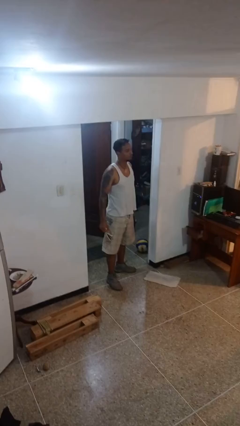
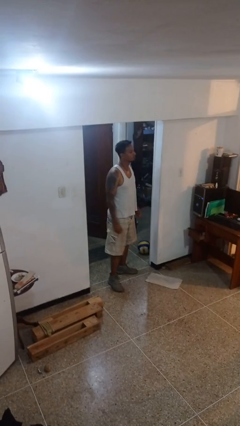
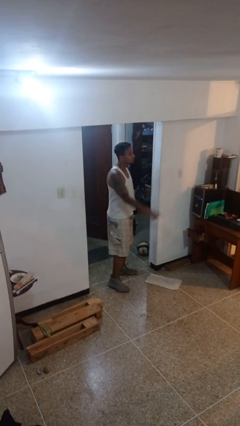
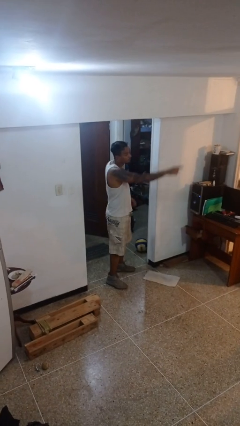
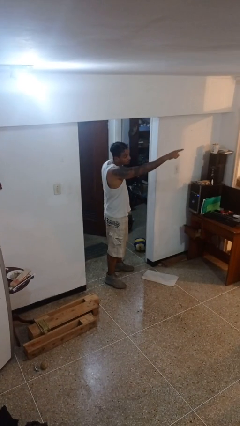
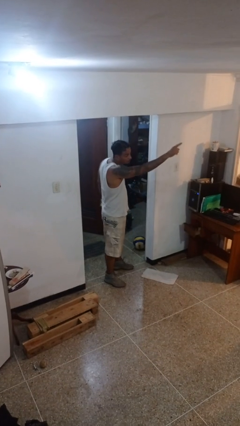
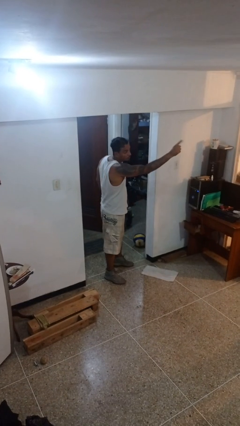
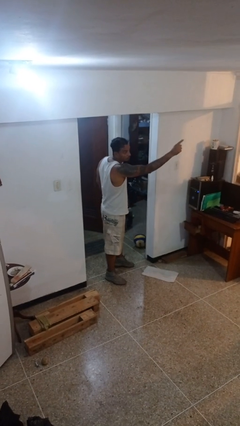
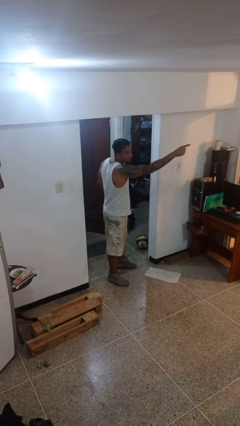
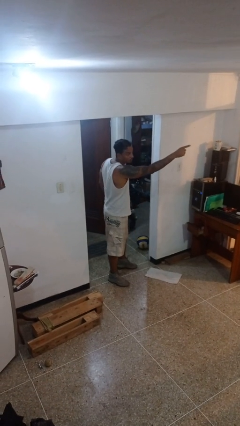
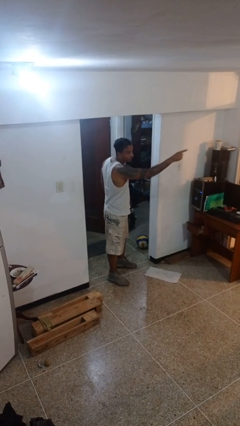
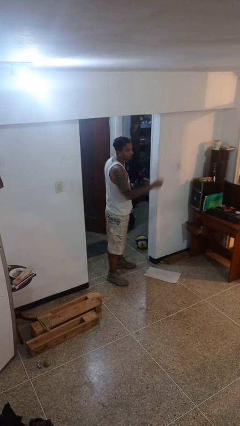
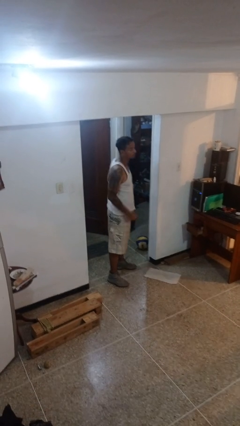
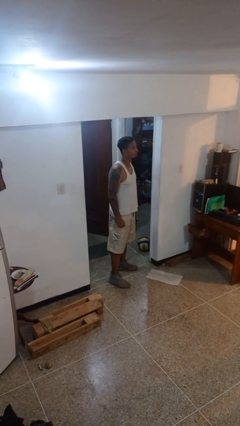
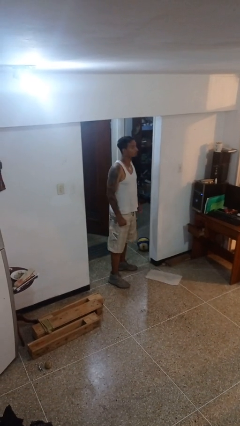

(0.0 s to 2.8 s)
person points at person

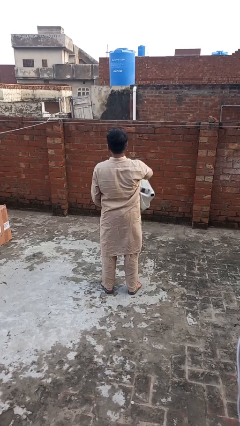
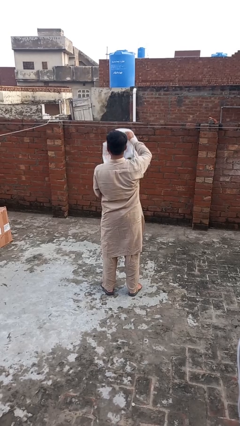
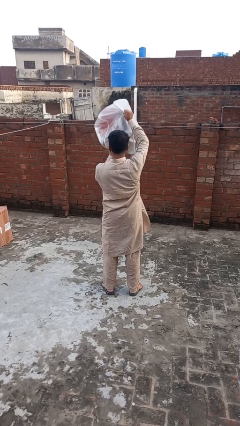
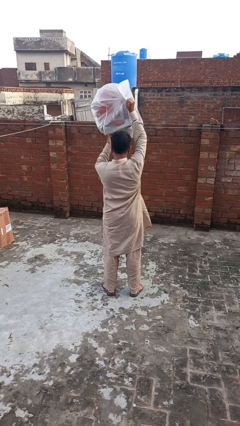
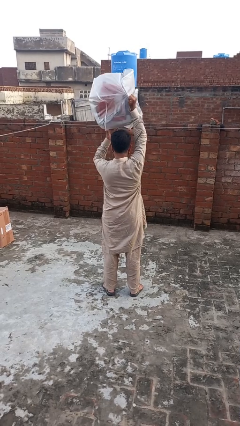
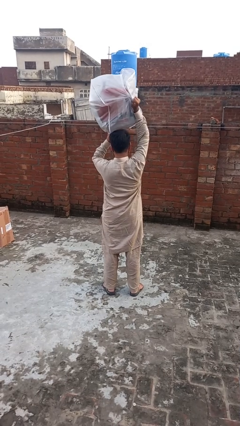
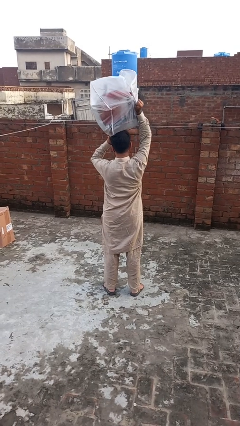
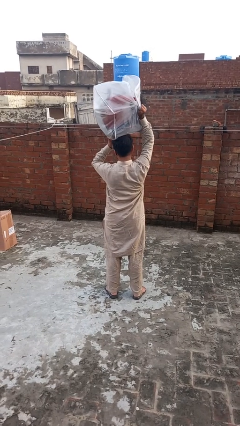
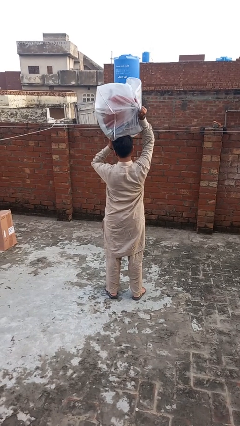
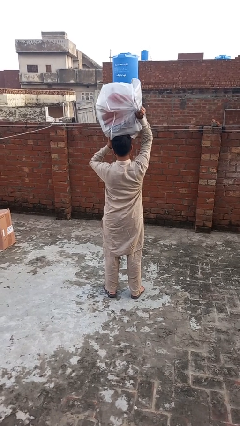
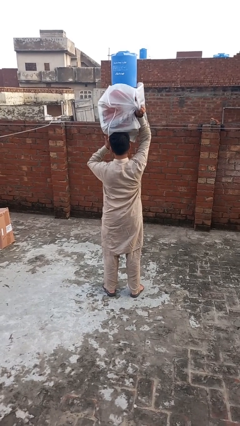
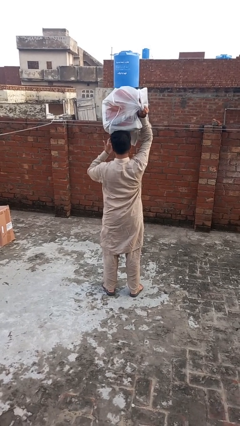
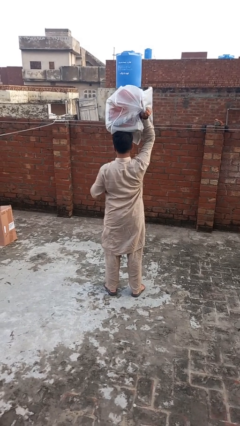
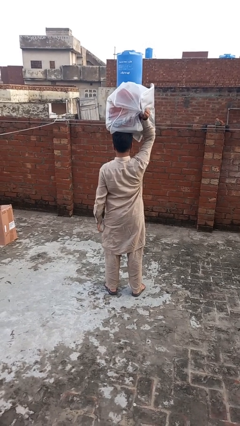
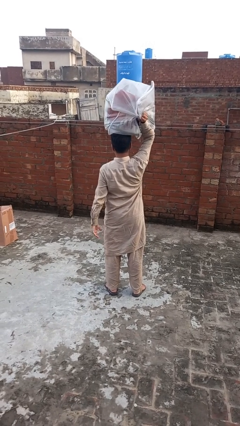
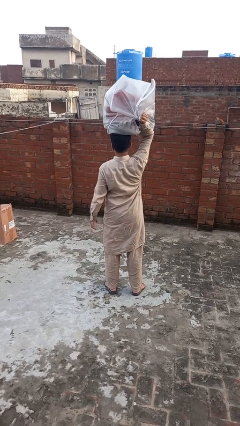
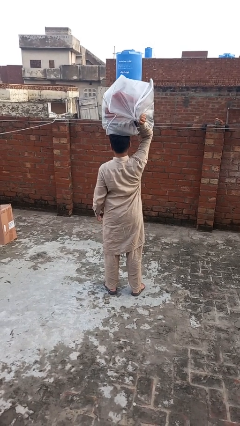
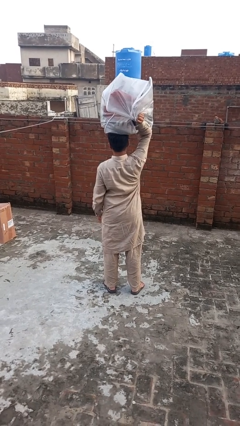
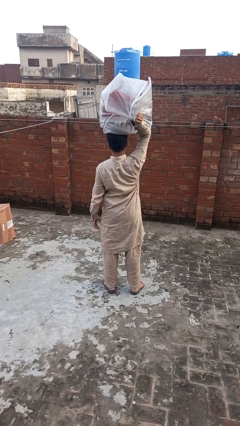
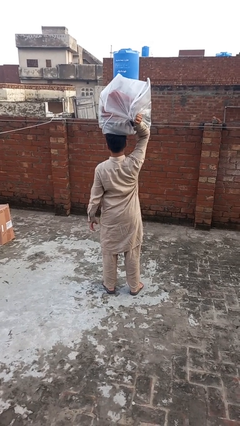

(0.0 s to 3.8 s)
person holds object above head

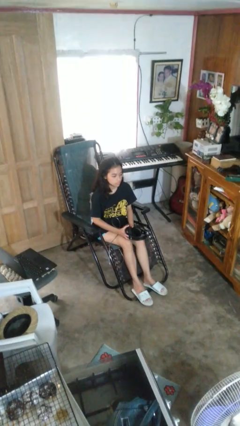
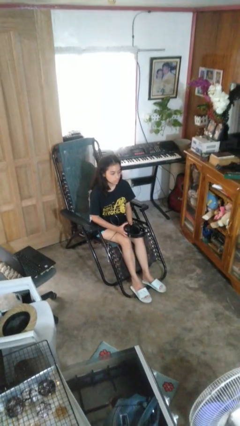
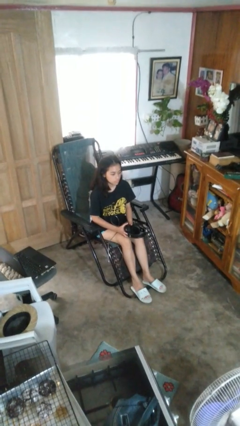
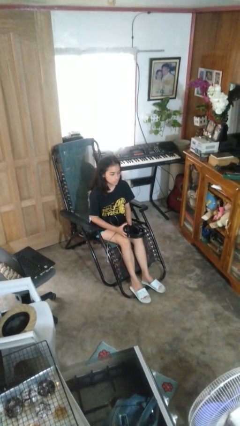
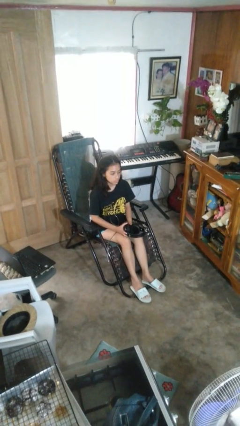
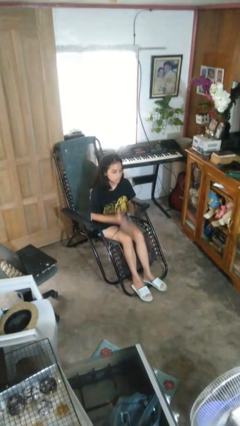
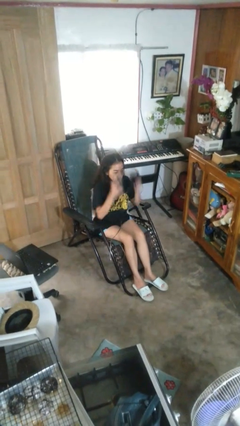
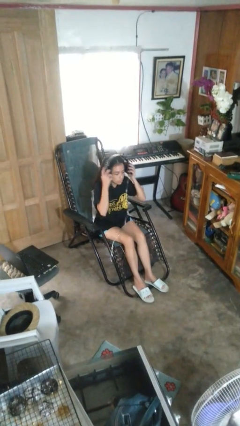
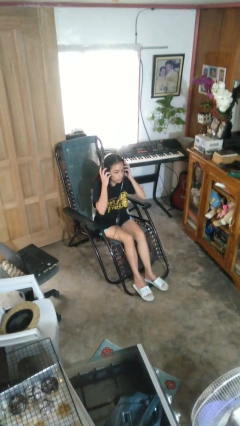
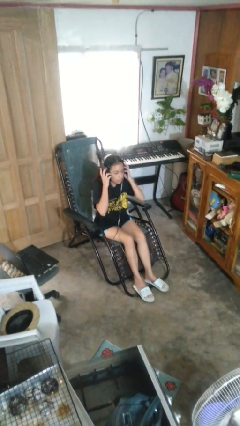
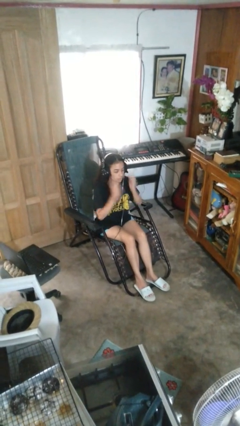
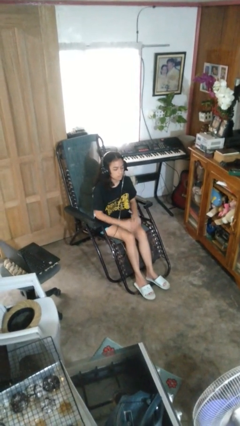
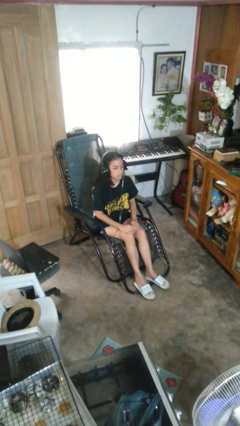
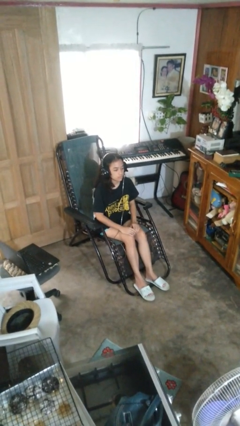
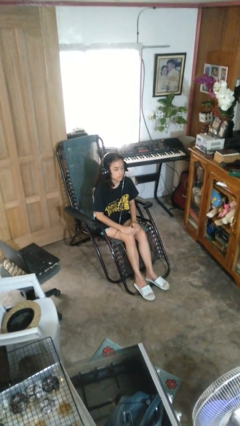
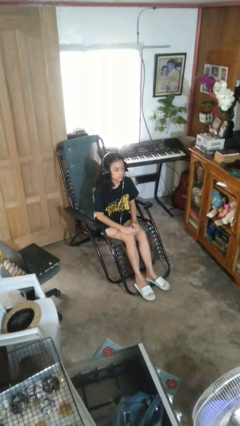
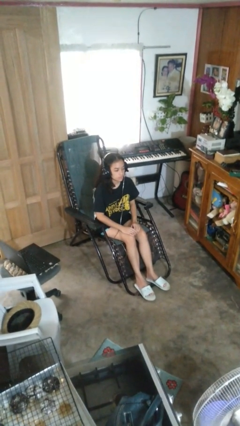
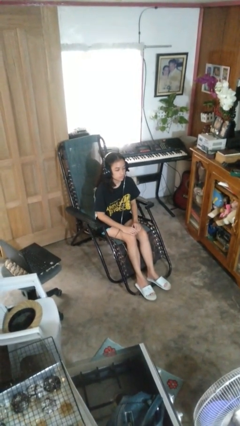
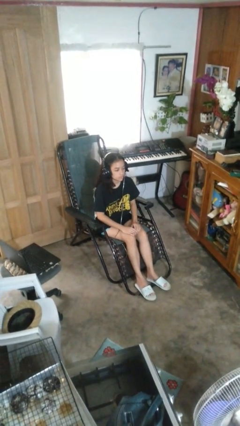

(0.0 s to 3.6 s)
person puts on headphones

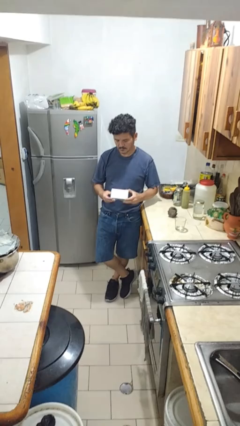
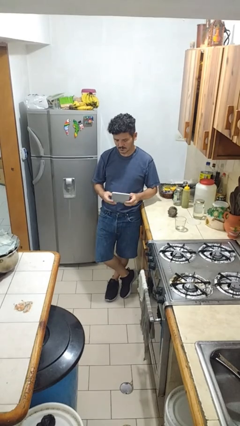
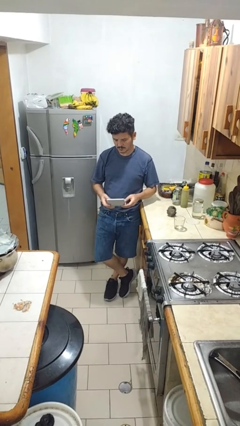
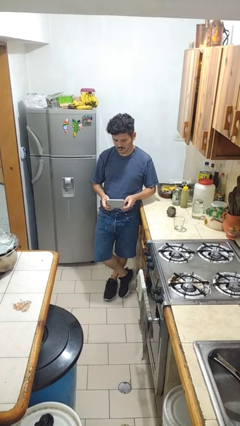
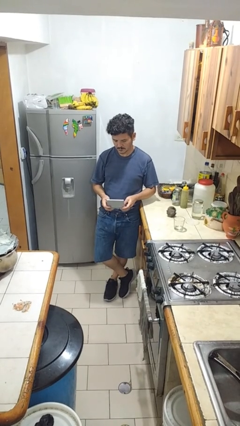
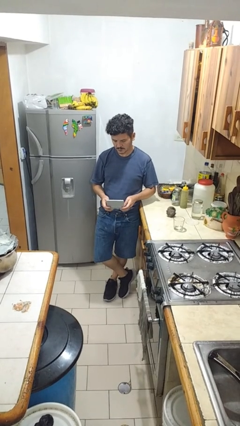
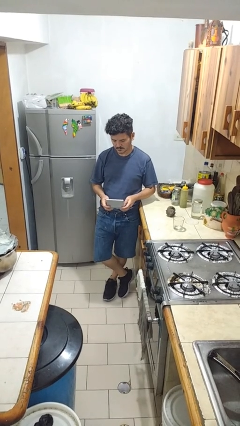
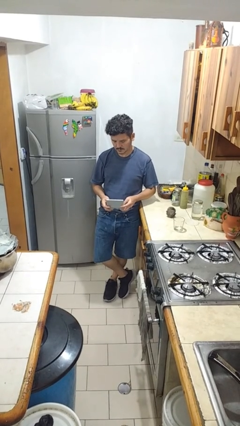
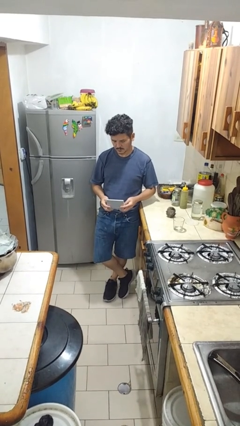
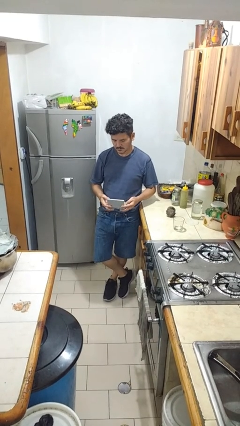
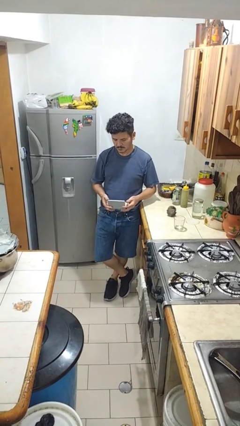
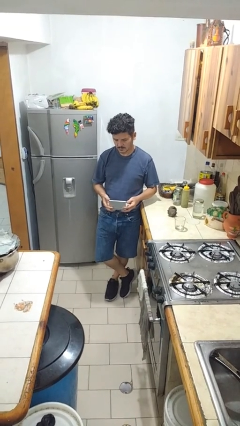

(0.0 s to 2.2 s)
person interacts with handheld game

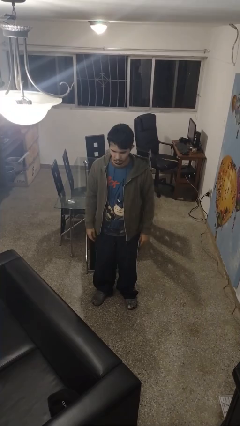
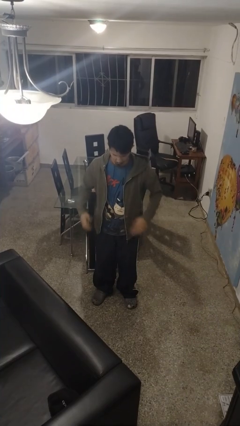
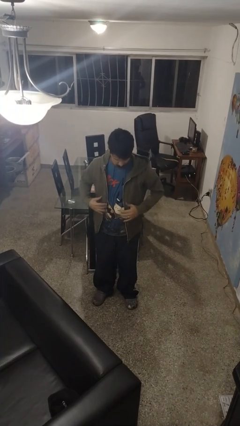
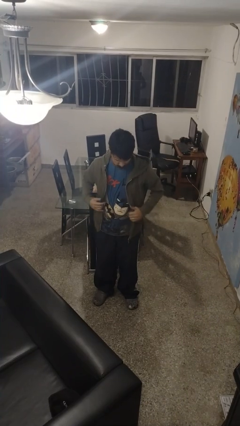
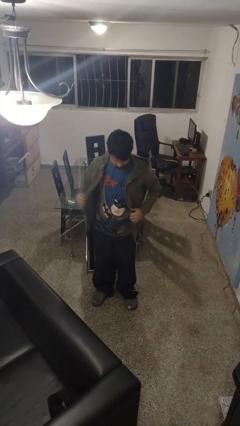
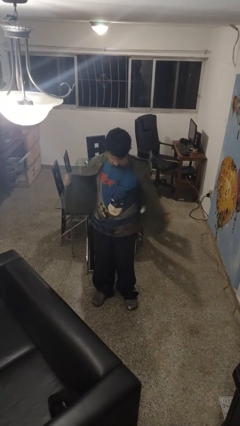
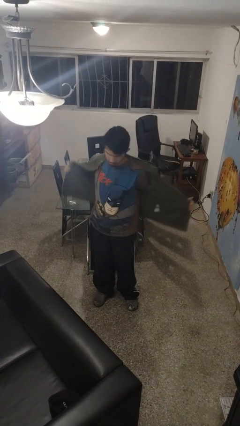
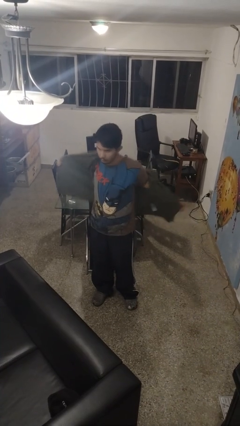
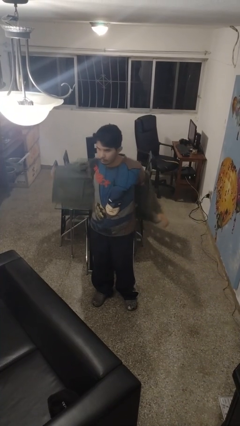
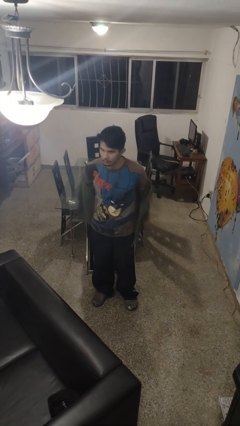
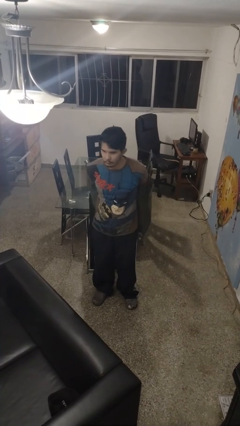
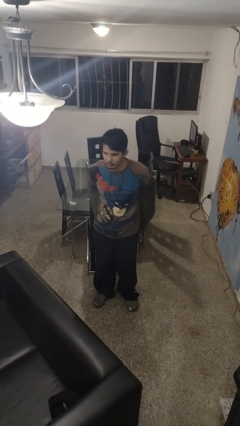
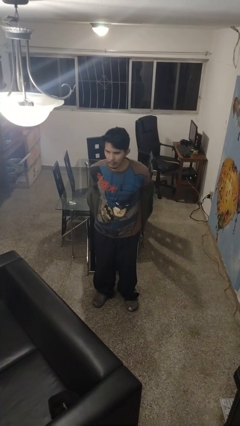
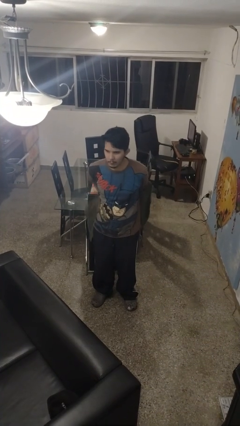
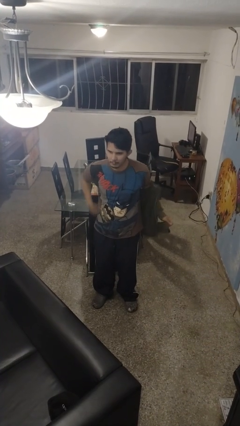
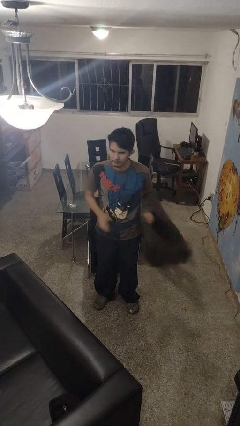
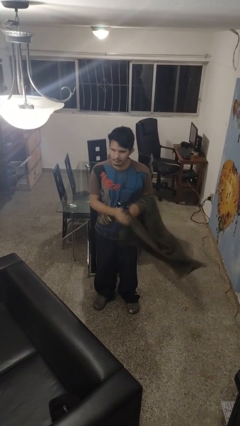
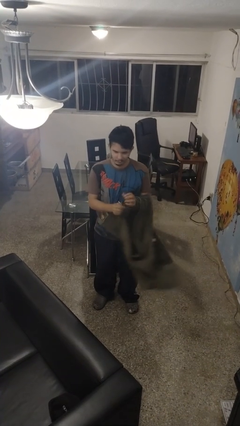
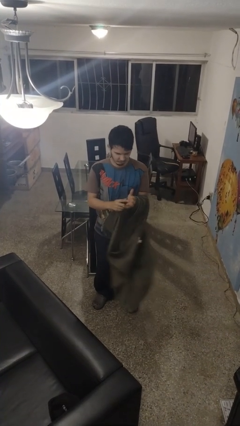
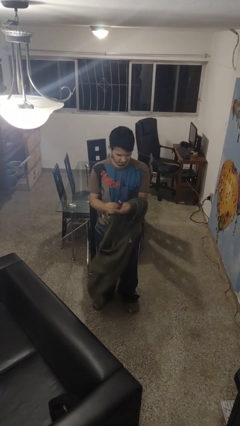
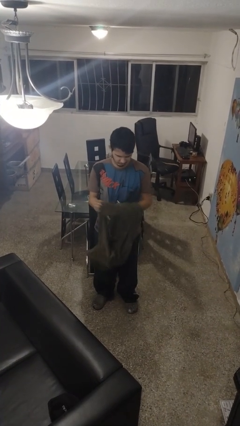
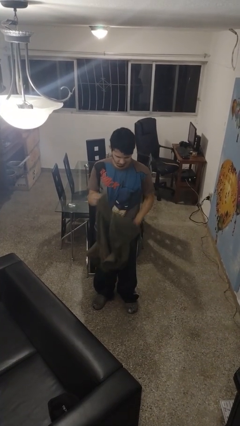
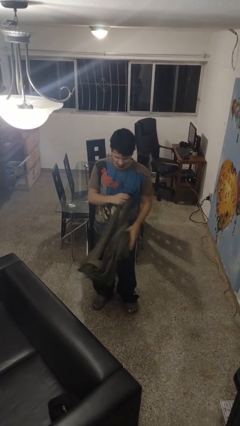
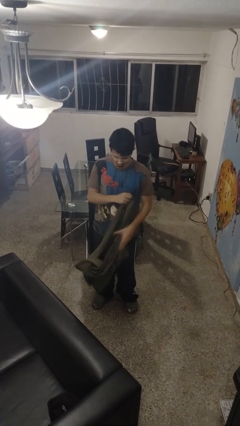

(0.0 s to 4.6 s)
person takes off jacket

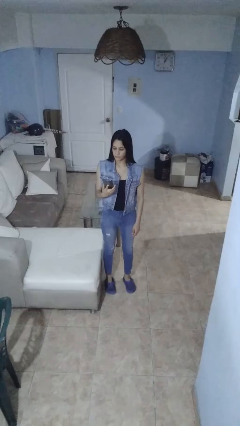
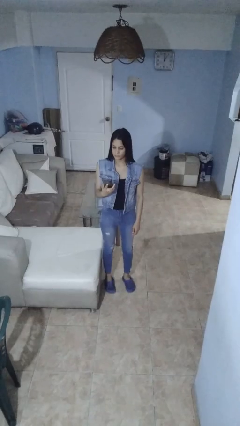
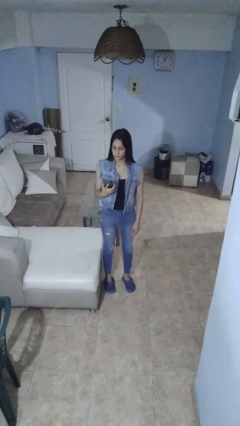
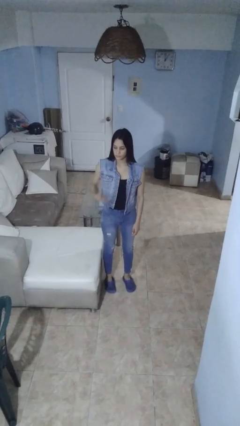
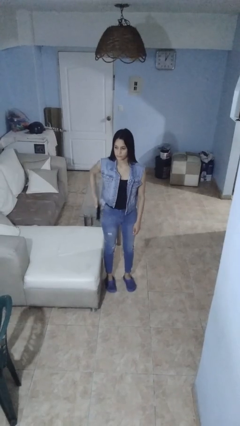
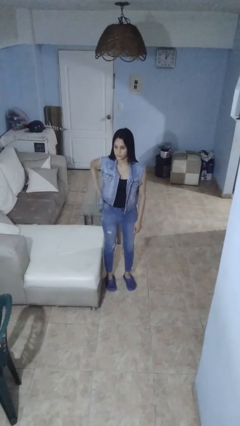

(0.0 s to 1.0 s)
person puts phone into pocket
